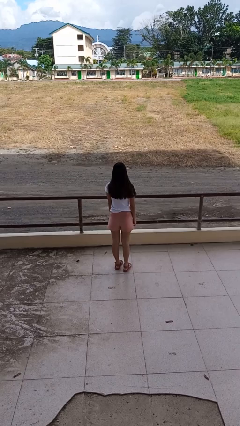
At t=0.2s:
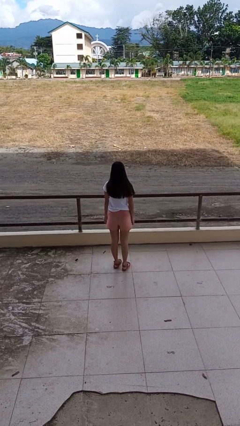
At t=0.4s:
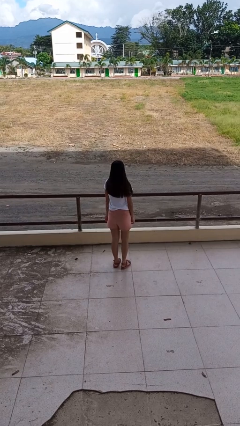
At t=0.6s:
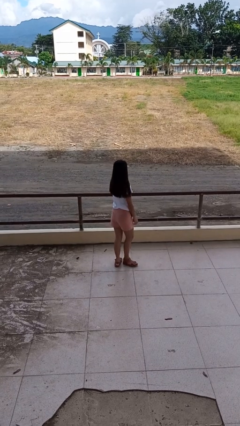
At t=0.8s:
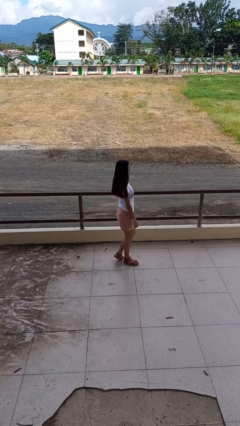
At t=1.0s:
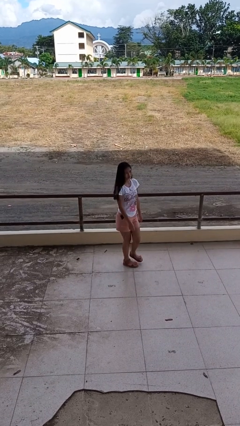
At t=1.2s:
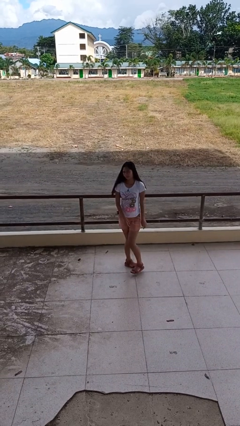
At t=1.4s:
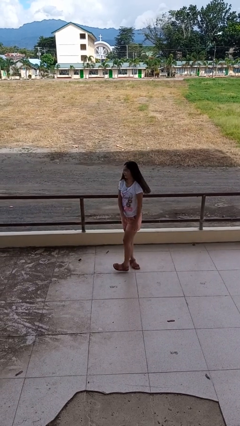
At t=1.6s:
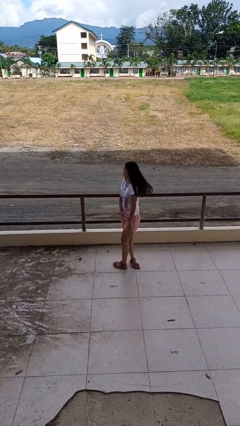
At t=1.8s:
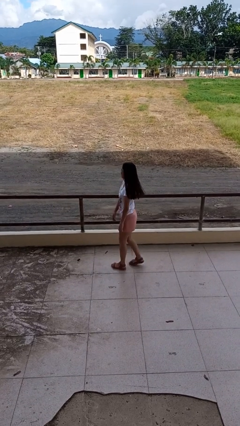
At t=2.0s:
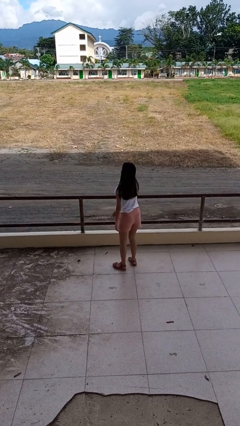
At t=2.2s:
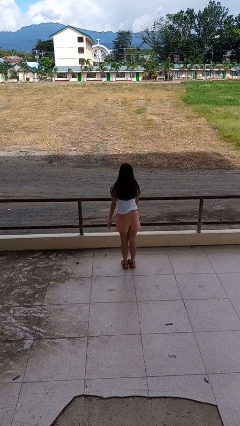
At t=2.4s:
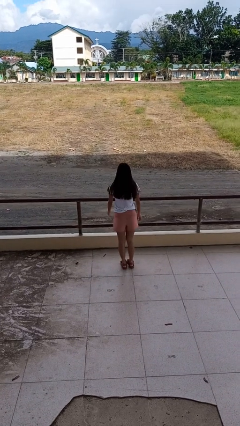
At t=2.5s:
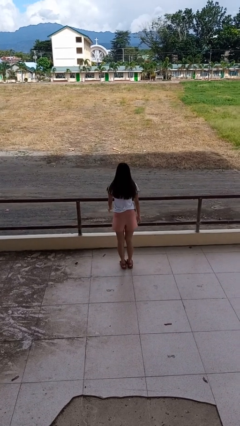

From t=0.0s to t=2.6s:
person twirls

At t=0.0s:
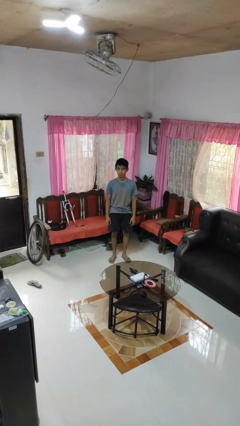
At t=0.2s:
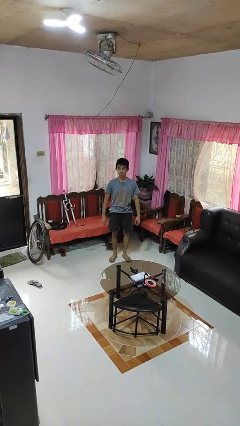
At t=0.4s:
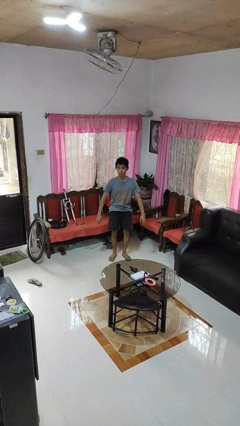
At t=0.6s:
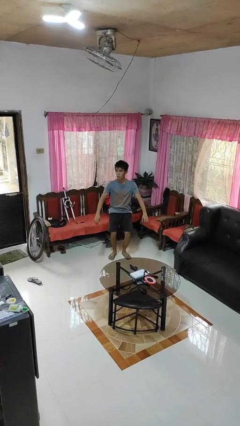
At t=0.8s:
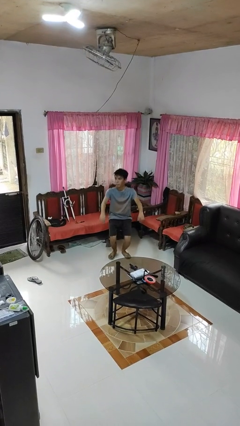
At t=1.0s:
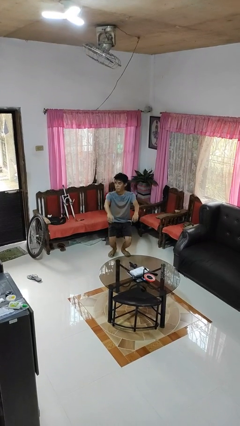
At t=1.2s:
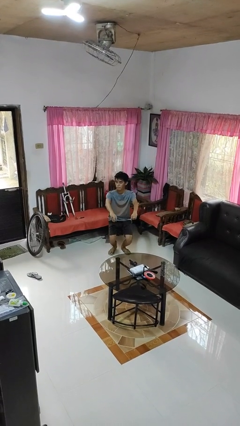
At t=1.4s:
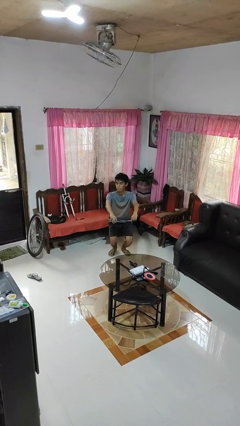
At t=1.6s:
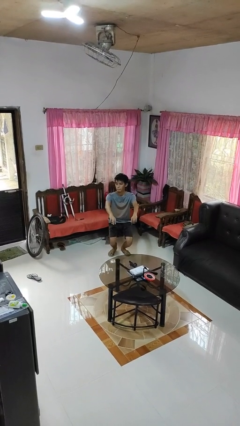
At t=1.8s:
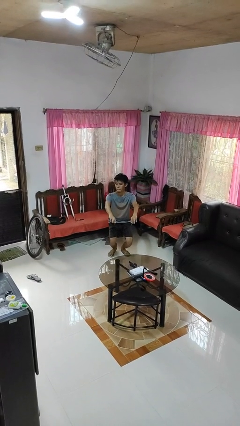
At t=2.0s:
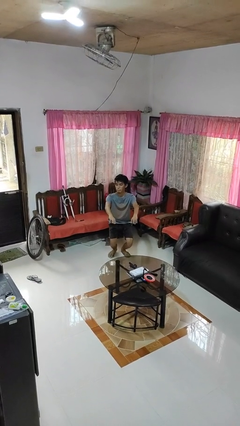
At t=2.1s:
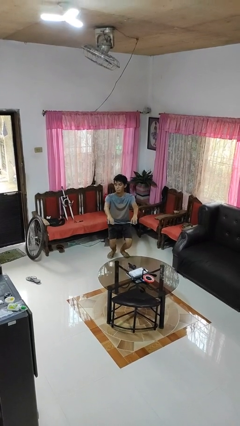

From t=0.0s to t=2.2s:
person squats

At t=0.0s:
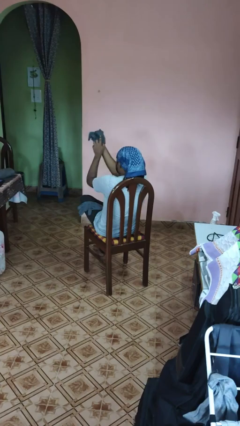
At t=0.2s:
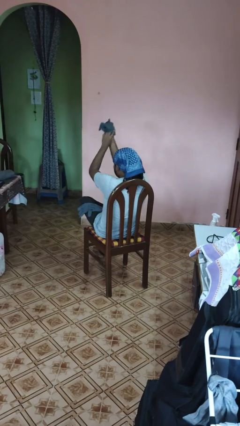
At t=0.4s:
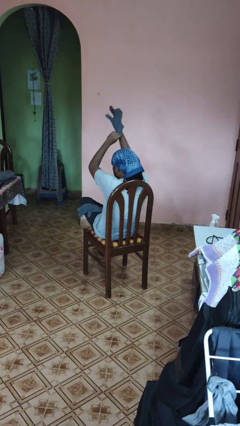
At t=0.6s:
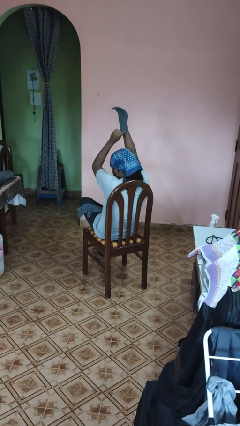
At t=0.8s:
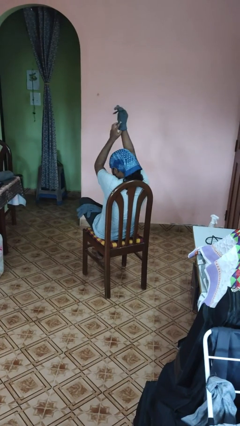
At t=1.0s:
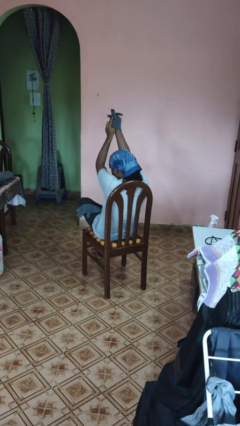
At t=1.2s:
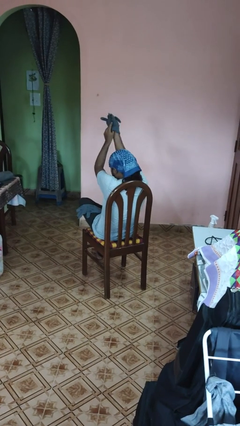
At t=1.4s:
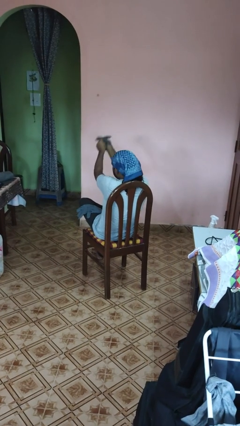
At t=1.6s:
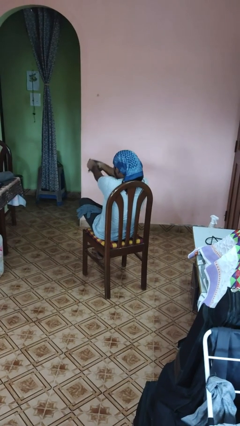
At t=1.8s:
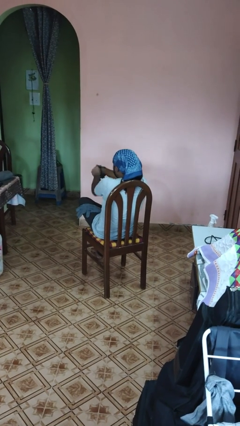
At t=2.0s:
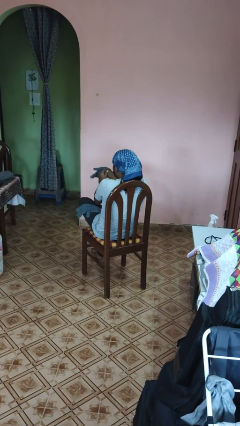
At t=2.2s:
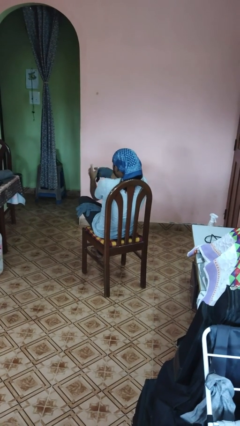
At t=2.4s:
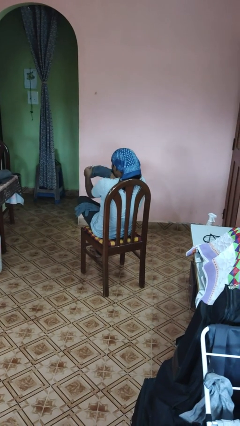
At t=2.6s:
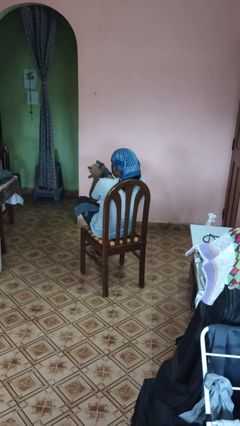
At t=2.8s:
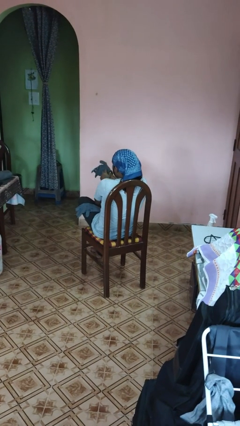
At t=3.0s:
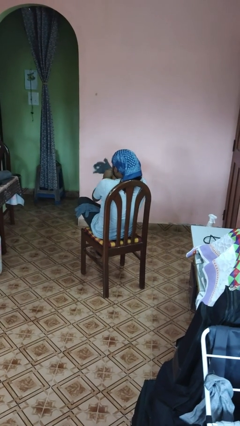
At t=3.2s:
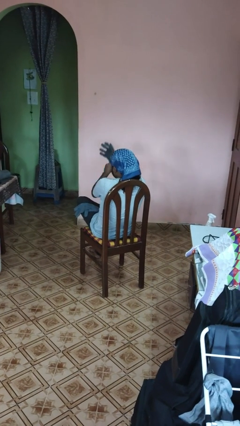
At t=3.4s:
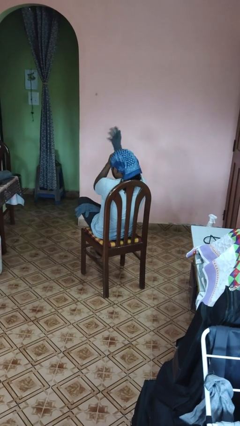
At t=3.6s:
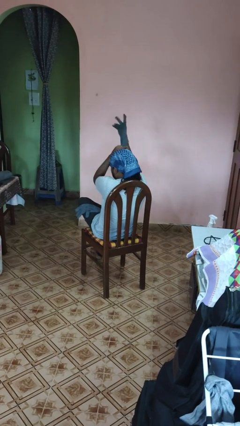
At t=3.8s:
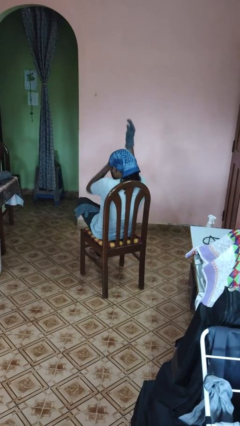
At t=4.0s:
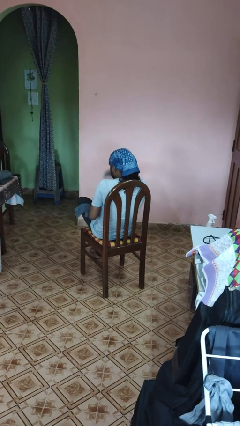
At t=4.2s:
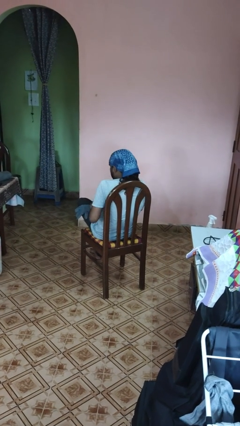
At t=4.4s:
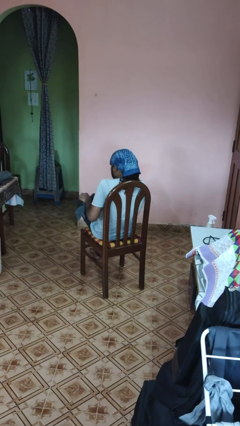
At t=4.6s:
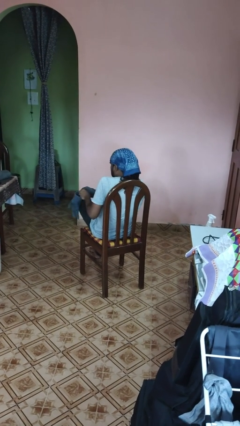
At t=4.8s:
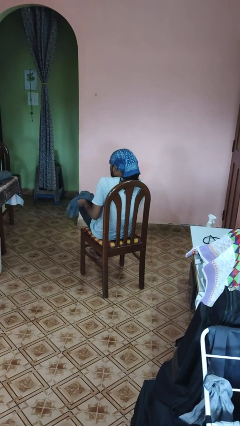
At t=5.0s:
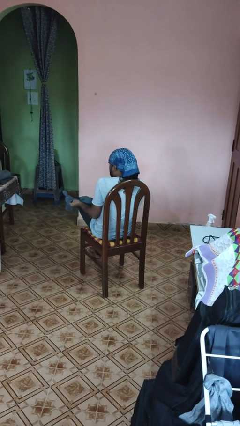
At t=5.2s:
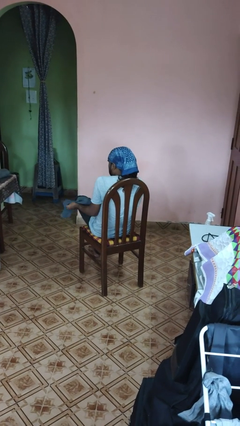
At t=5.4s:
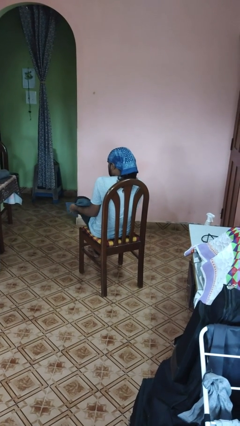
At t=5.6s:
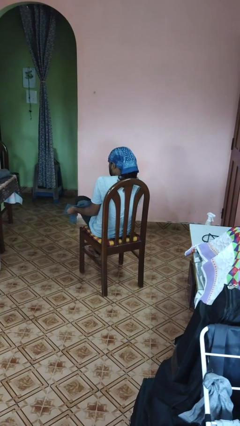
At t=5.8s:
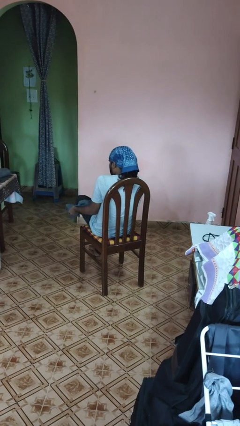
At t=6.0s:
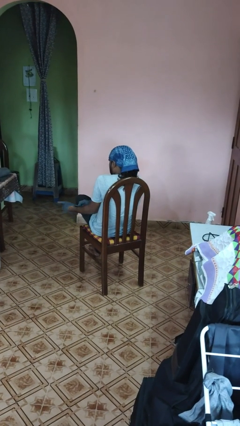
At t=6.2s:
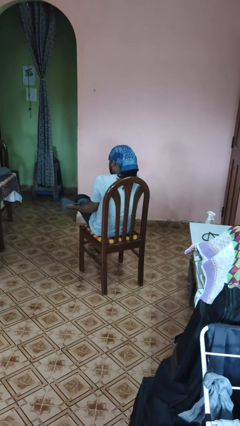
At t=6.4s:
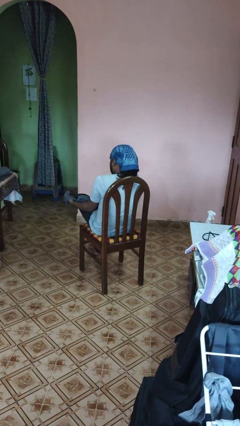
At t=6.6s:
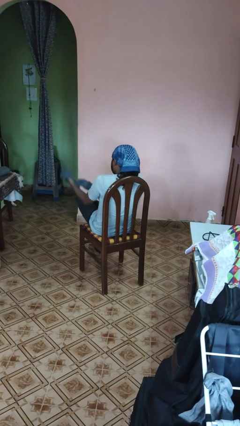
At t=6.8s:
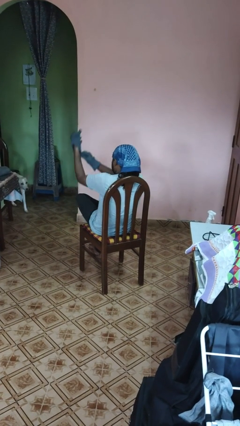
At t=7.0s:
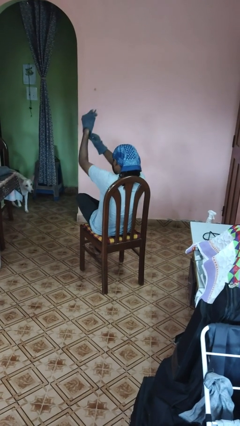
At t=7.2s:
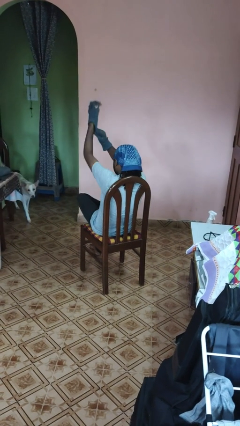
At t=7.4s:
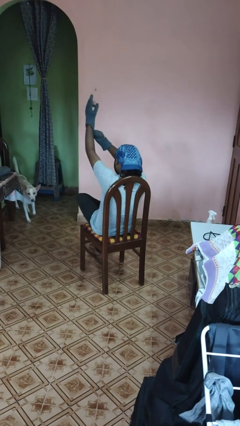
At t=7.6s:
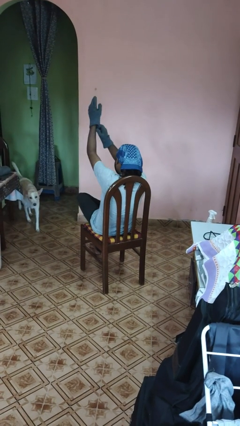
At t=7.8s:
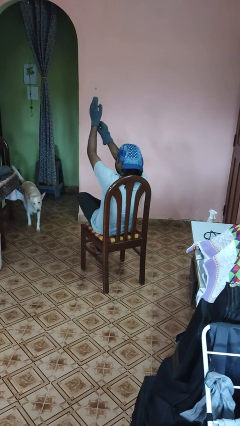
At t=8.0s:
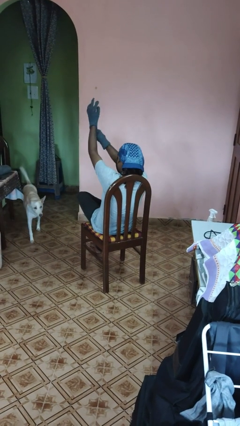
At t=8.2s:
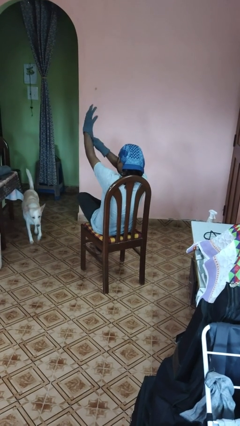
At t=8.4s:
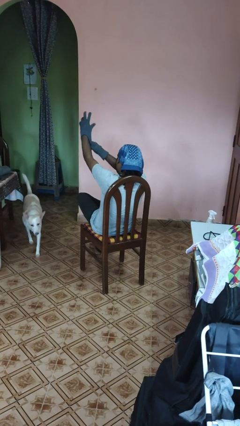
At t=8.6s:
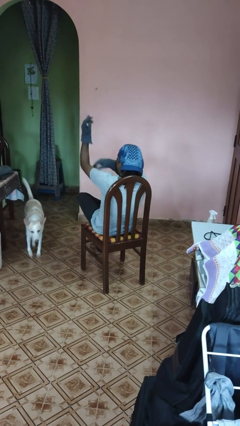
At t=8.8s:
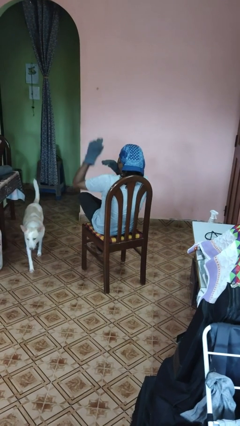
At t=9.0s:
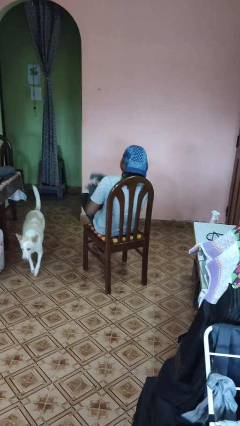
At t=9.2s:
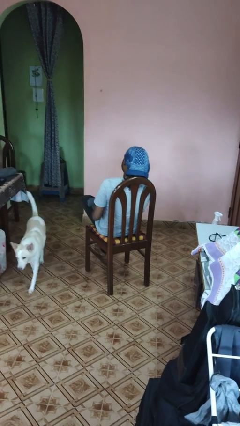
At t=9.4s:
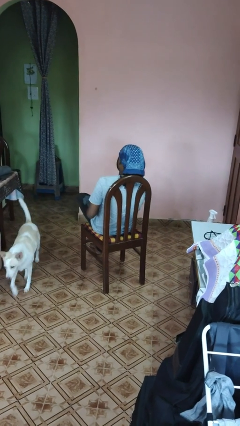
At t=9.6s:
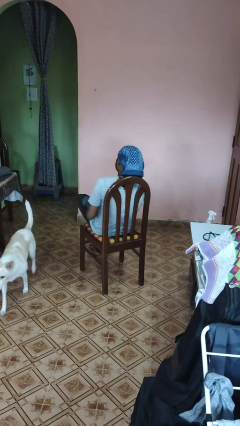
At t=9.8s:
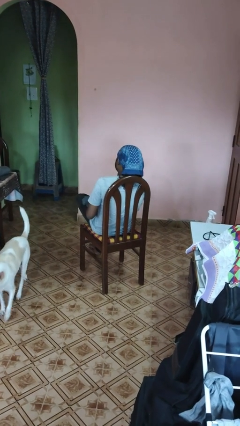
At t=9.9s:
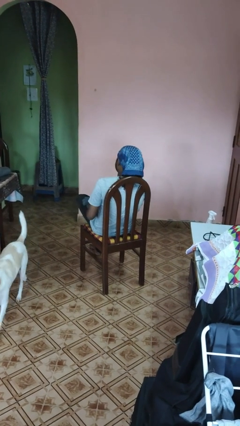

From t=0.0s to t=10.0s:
person puts on gloves

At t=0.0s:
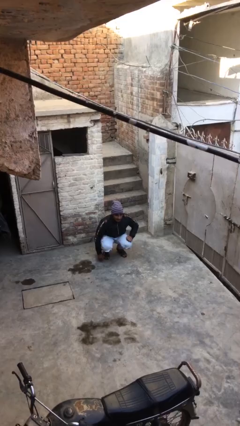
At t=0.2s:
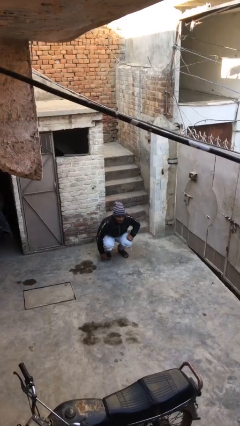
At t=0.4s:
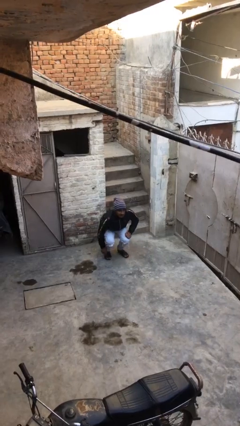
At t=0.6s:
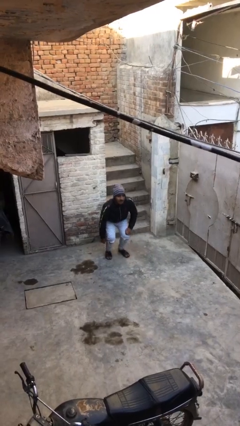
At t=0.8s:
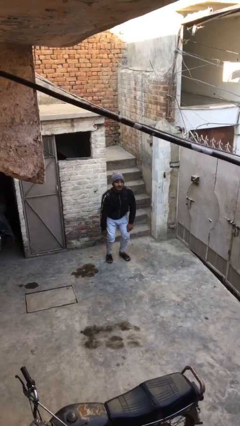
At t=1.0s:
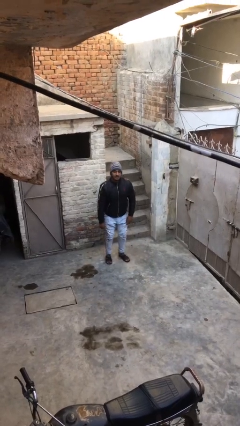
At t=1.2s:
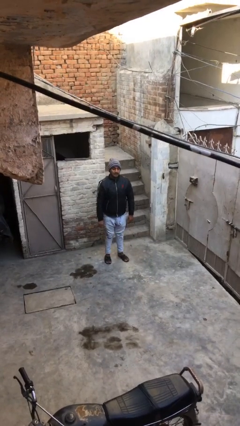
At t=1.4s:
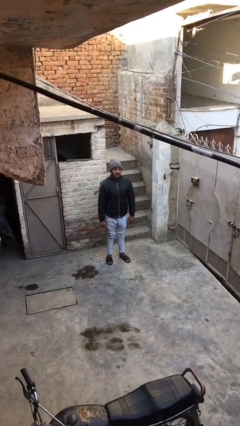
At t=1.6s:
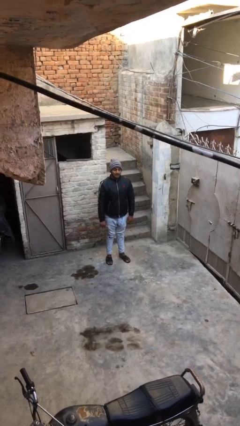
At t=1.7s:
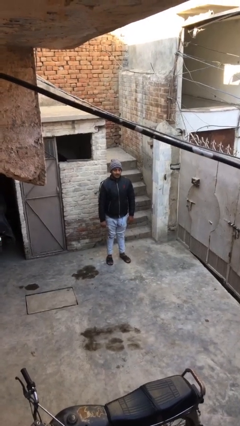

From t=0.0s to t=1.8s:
person stands up

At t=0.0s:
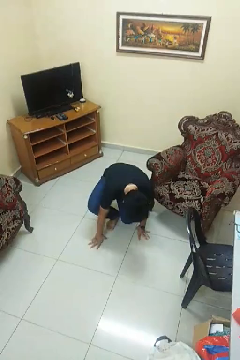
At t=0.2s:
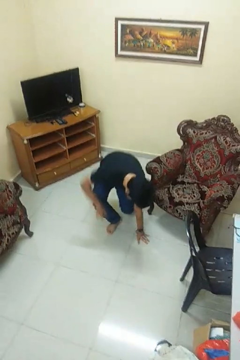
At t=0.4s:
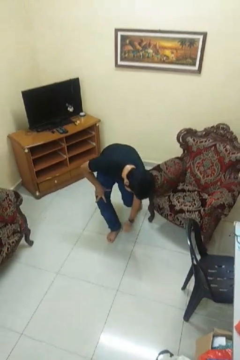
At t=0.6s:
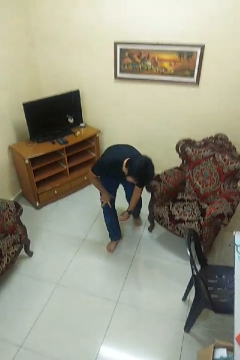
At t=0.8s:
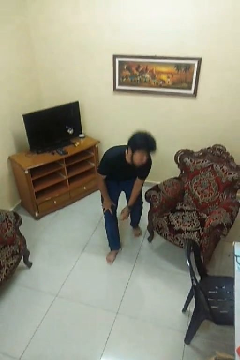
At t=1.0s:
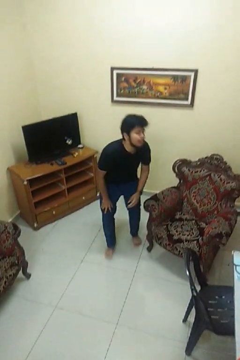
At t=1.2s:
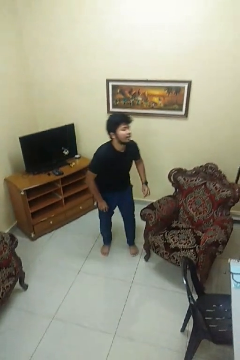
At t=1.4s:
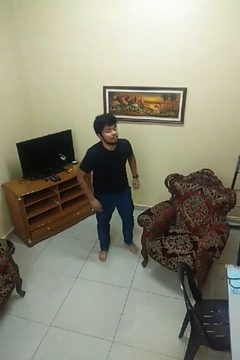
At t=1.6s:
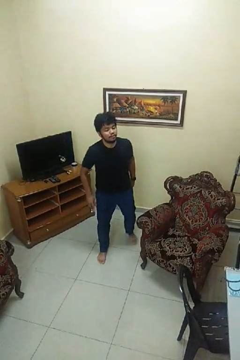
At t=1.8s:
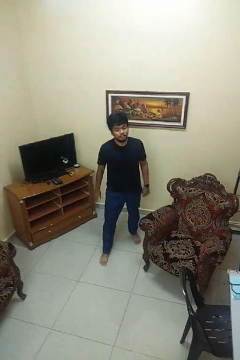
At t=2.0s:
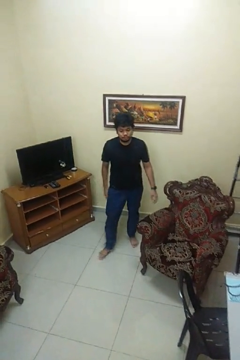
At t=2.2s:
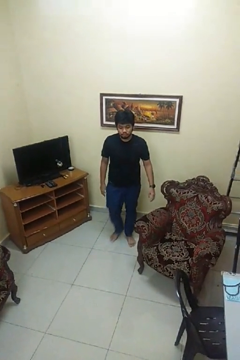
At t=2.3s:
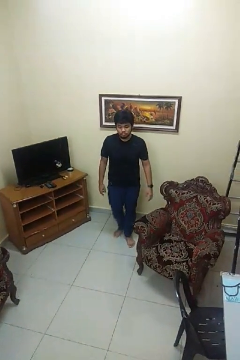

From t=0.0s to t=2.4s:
person stands up from floor
